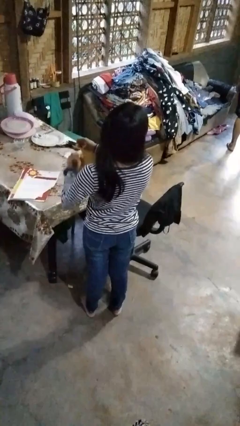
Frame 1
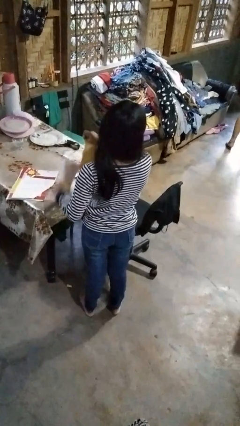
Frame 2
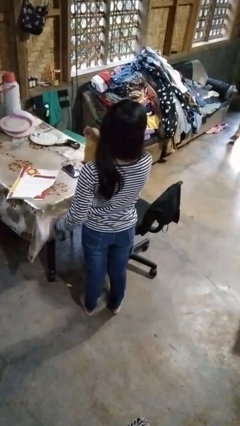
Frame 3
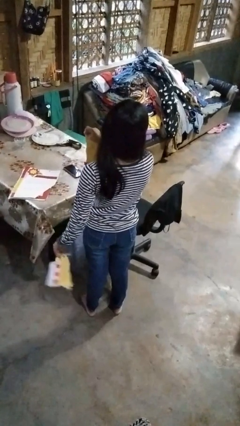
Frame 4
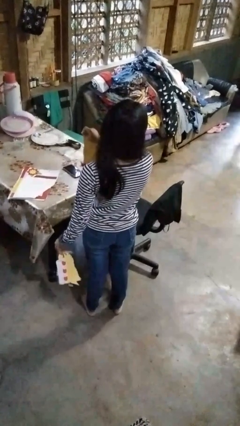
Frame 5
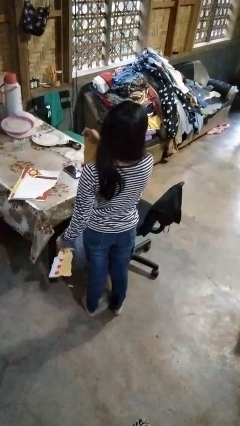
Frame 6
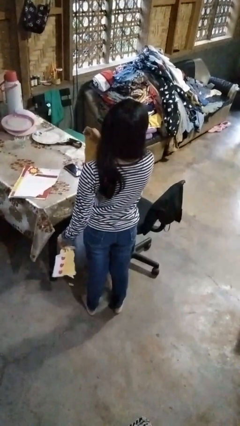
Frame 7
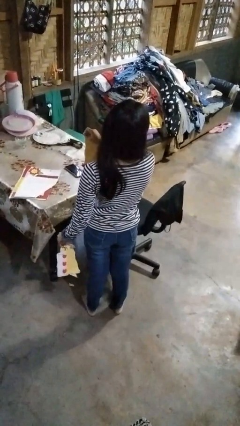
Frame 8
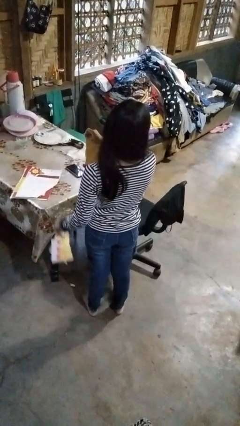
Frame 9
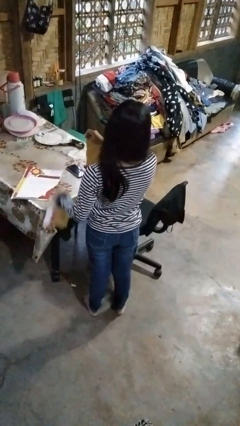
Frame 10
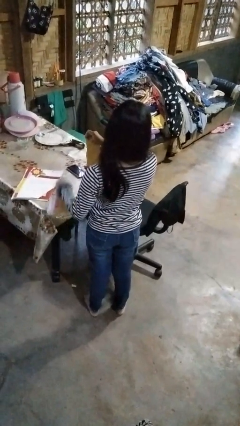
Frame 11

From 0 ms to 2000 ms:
person tears paper

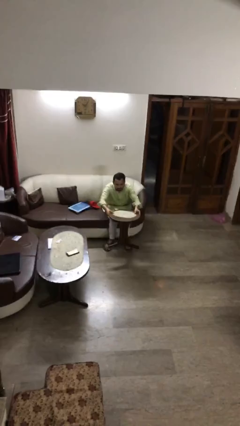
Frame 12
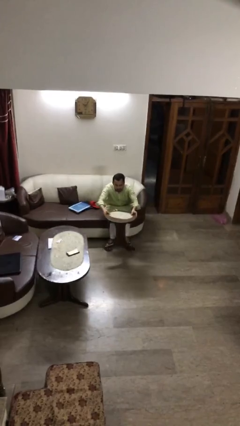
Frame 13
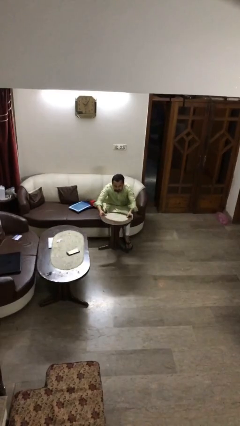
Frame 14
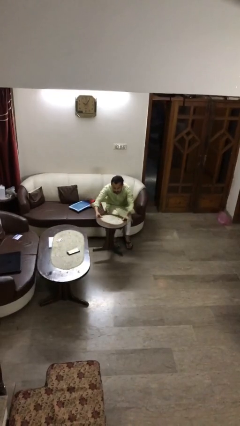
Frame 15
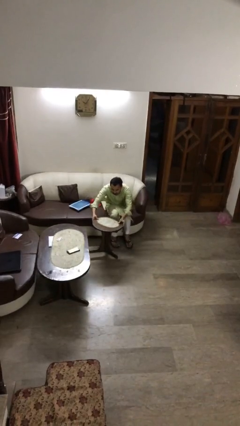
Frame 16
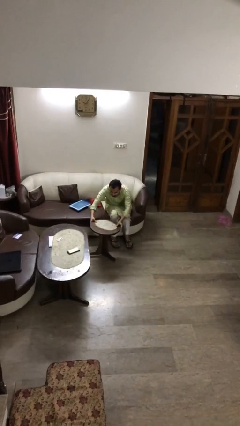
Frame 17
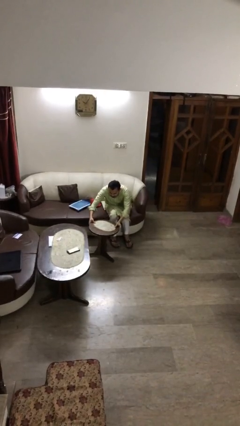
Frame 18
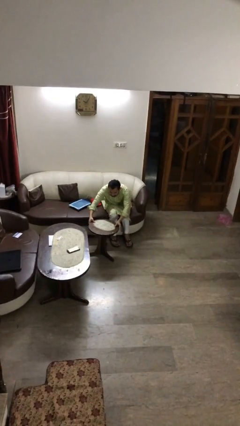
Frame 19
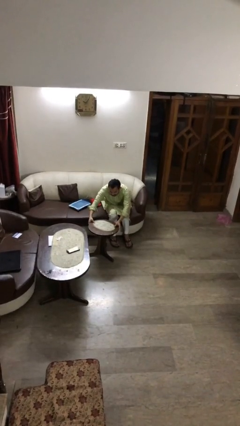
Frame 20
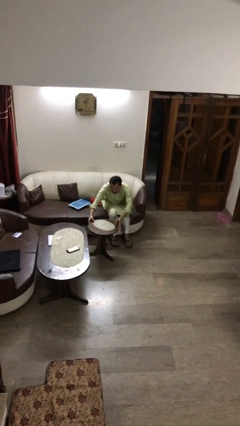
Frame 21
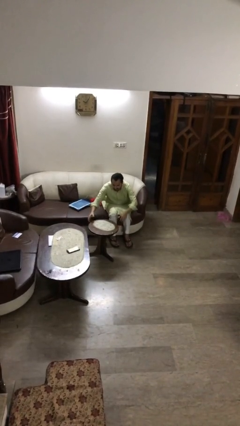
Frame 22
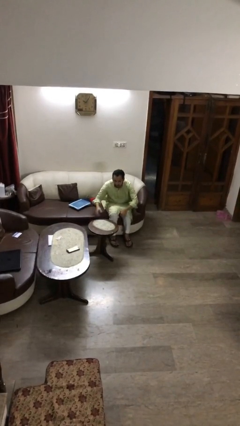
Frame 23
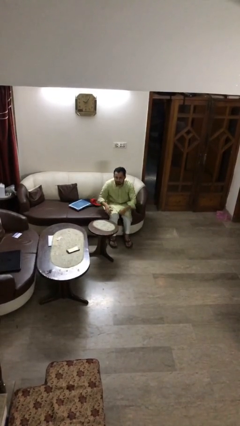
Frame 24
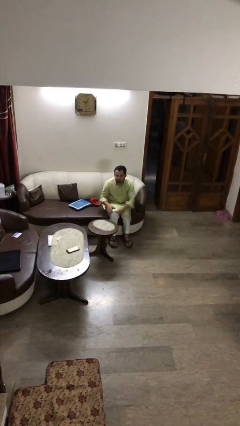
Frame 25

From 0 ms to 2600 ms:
person puts down object on floor

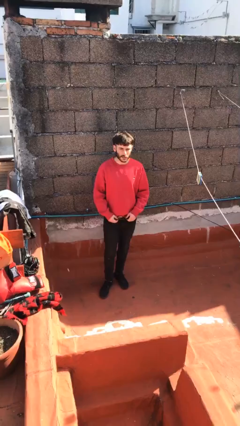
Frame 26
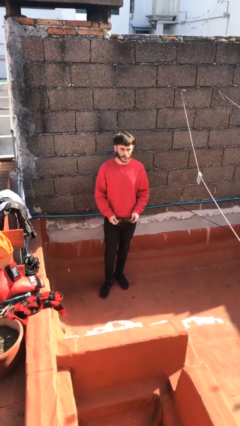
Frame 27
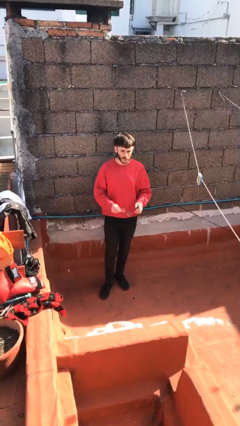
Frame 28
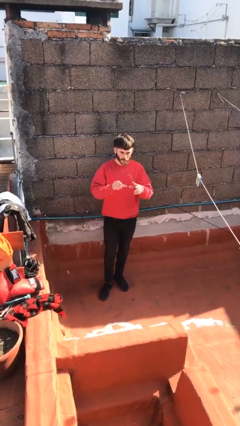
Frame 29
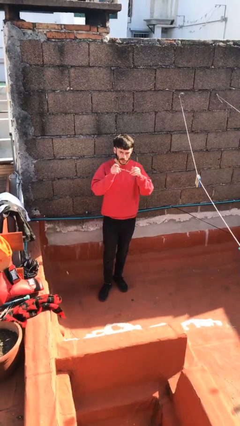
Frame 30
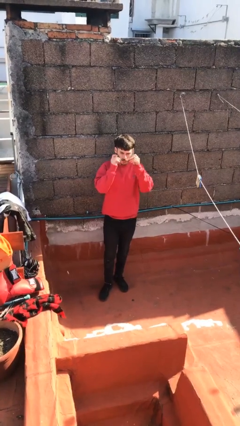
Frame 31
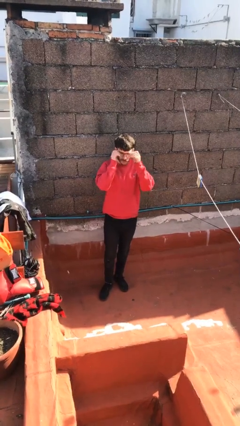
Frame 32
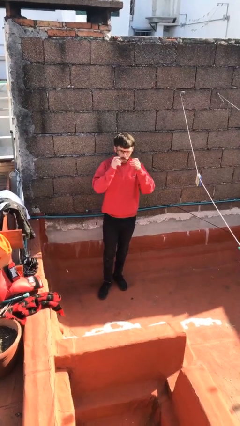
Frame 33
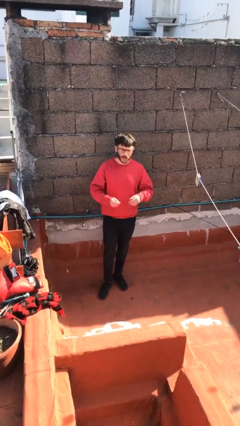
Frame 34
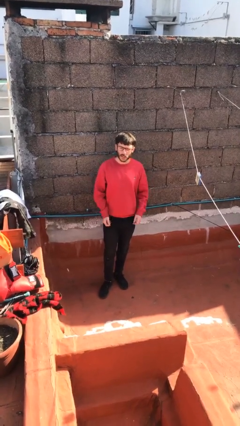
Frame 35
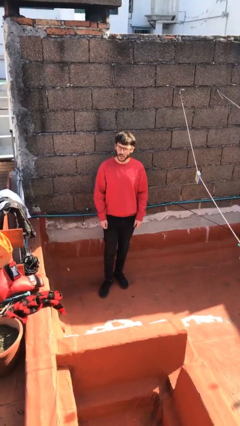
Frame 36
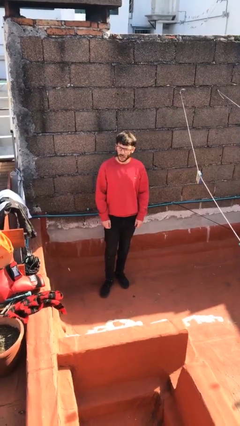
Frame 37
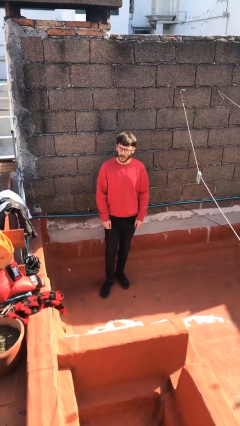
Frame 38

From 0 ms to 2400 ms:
person puts on glasses

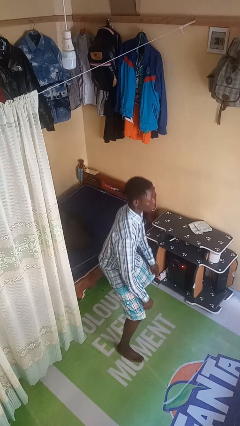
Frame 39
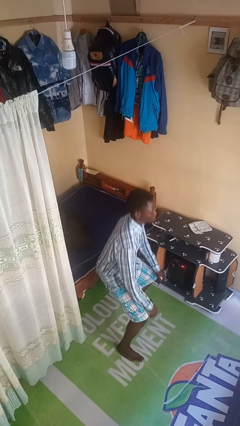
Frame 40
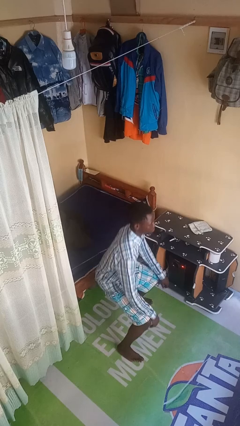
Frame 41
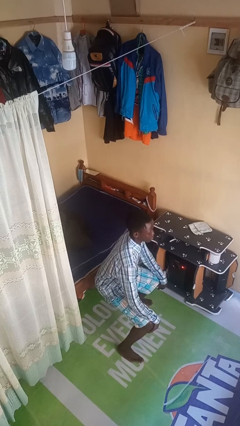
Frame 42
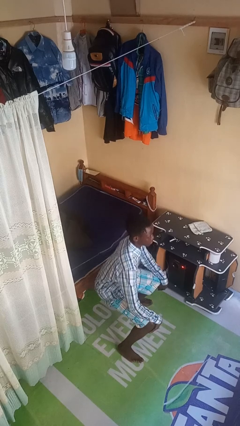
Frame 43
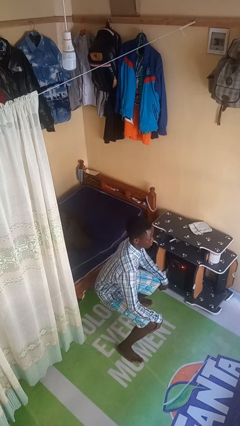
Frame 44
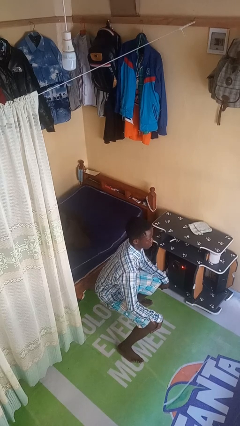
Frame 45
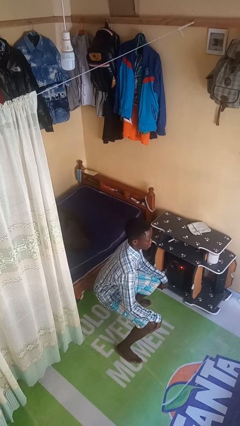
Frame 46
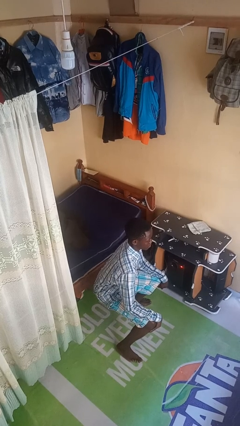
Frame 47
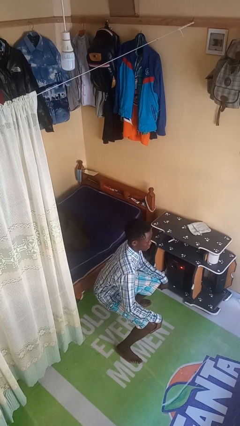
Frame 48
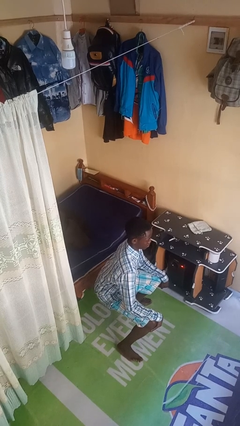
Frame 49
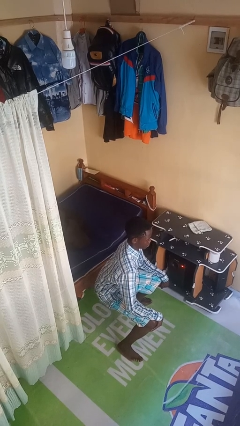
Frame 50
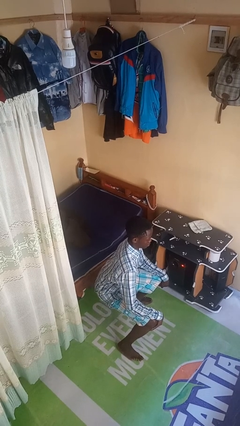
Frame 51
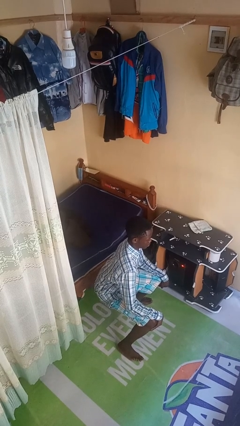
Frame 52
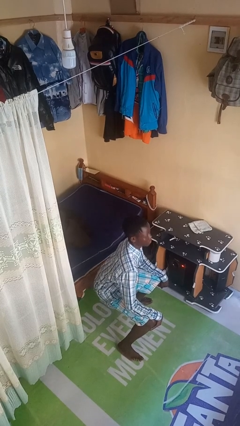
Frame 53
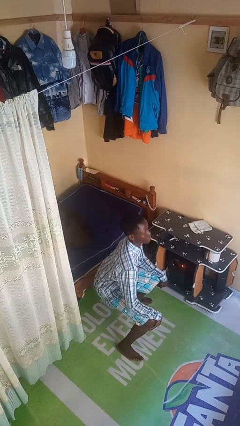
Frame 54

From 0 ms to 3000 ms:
person squats

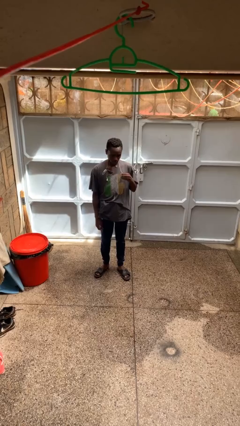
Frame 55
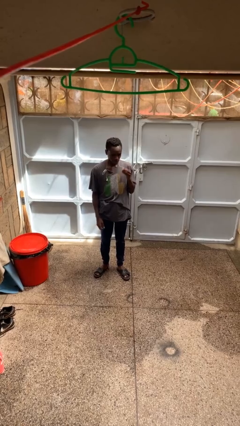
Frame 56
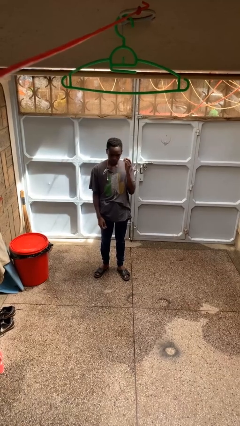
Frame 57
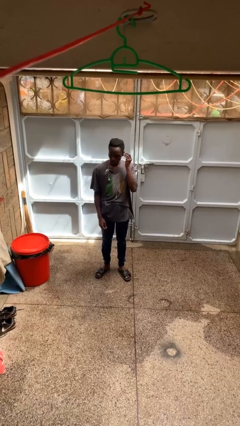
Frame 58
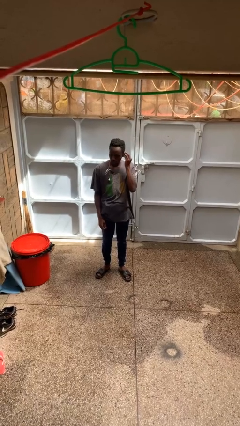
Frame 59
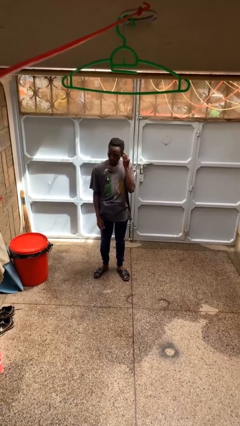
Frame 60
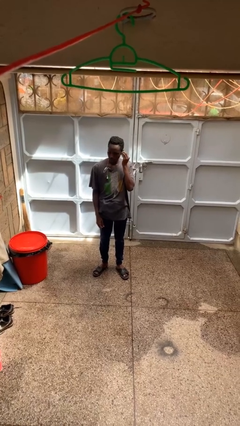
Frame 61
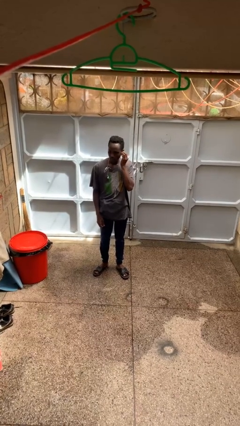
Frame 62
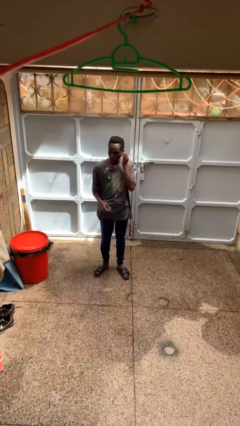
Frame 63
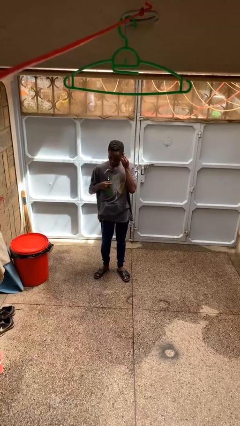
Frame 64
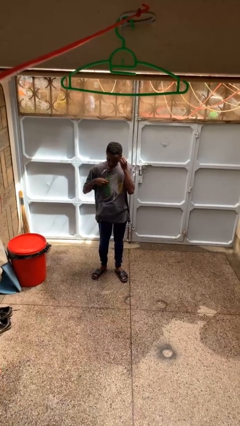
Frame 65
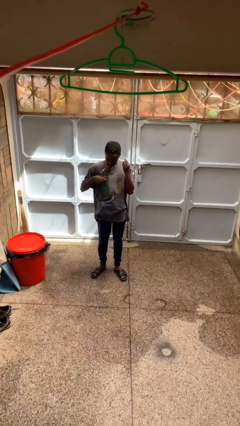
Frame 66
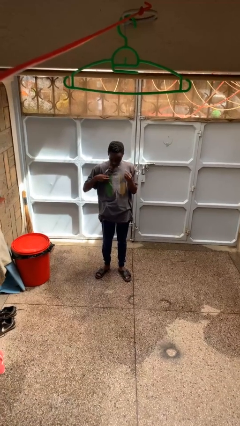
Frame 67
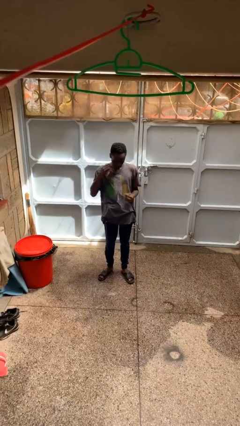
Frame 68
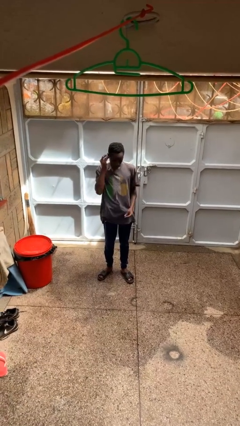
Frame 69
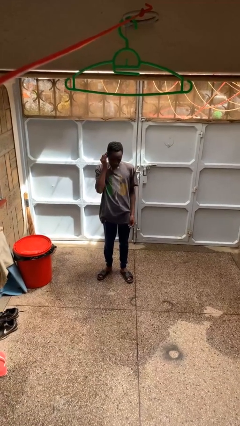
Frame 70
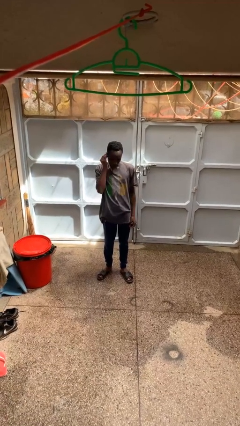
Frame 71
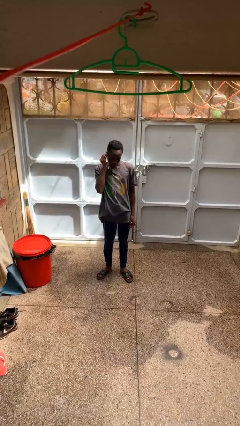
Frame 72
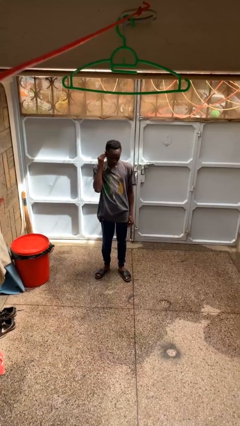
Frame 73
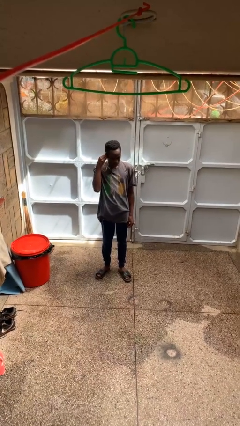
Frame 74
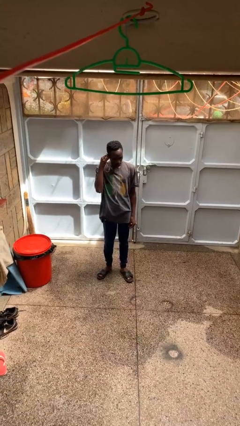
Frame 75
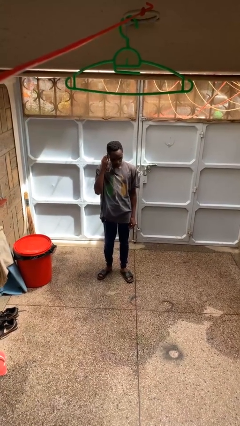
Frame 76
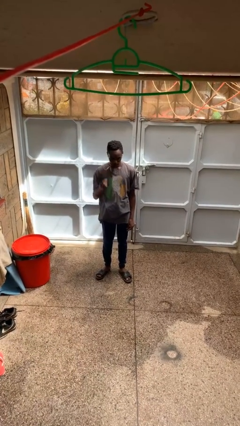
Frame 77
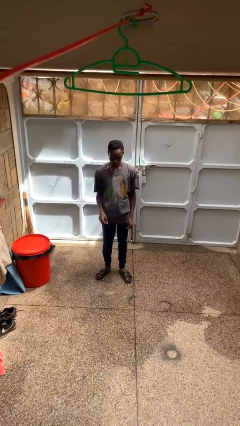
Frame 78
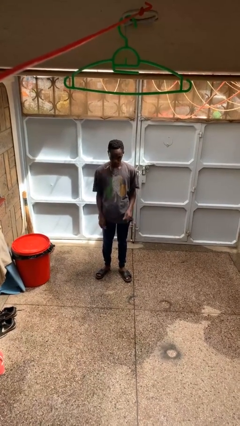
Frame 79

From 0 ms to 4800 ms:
person puts on headphones

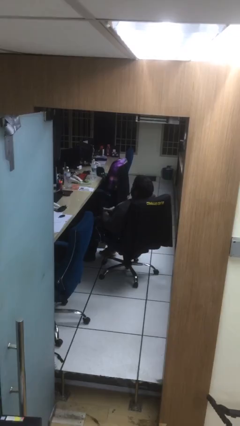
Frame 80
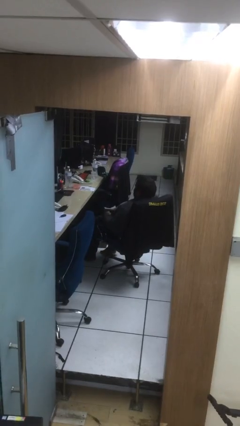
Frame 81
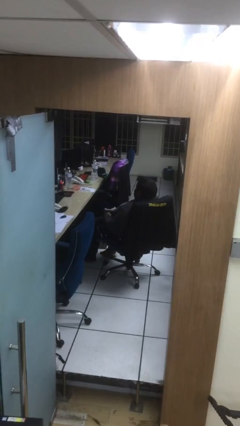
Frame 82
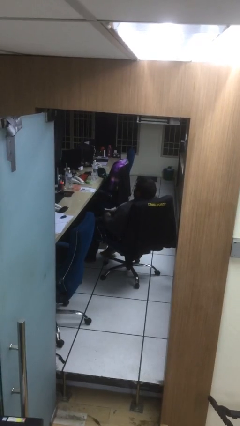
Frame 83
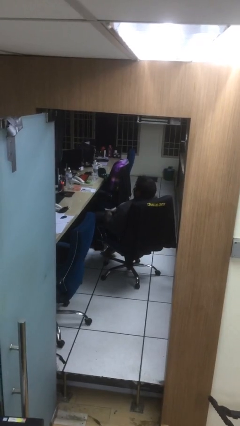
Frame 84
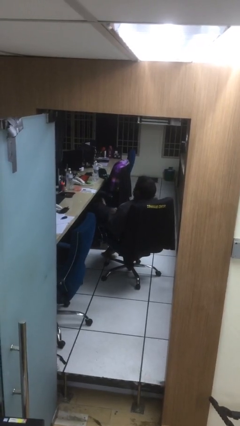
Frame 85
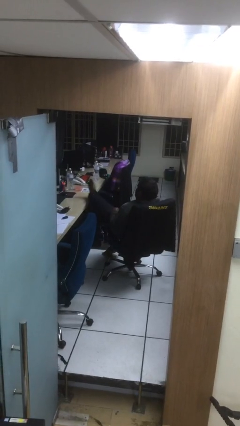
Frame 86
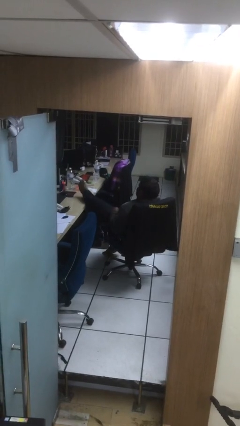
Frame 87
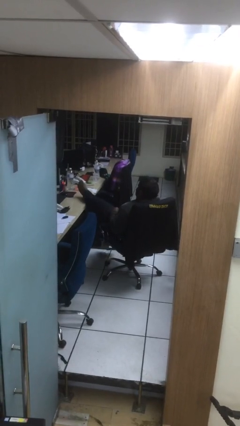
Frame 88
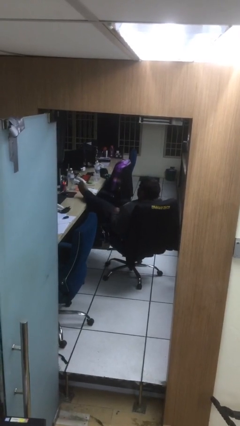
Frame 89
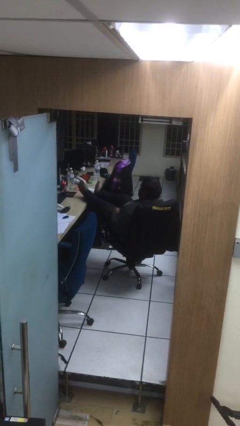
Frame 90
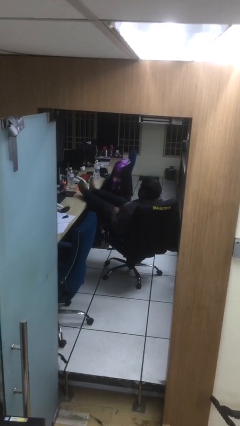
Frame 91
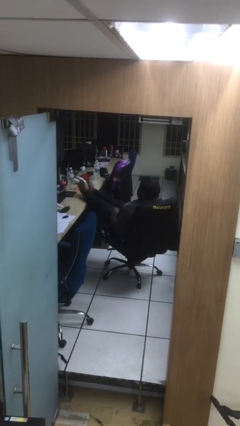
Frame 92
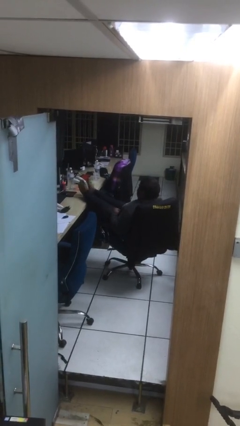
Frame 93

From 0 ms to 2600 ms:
person puts feet up

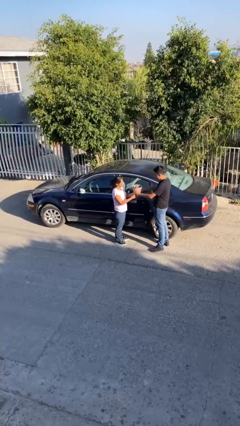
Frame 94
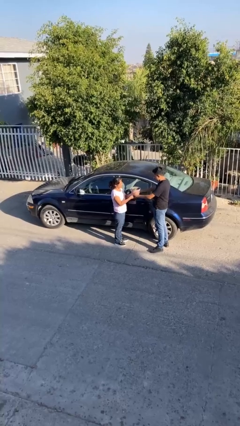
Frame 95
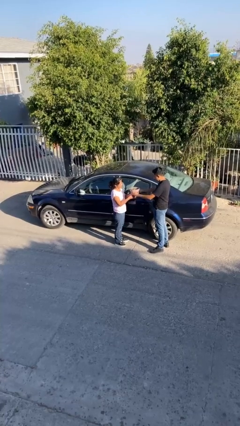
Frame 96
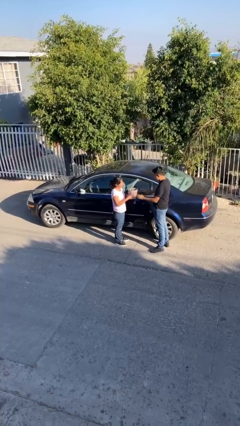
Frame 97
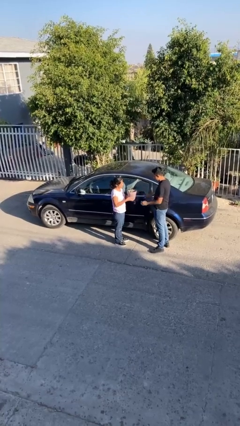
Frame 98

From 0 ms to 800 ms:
person transfers object to person
